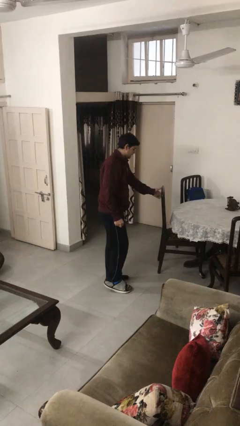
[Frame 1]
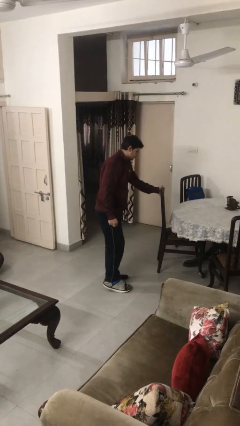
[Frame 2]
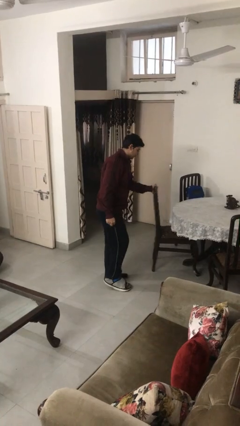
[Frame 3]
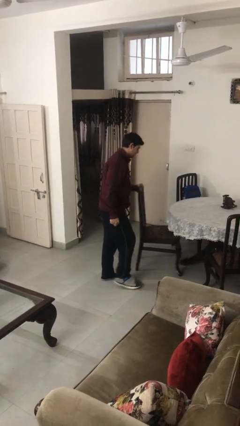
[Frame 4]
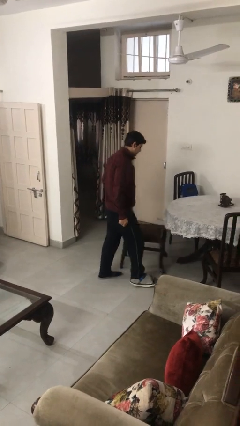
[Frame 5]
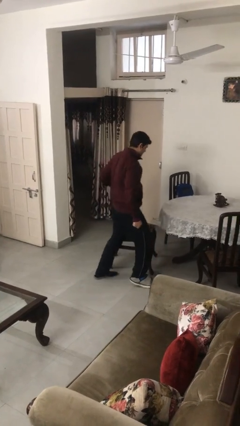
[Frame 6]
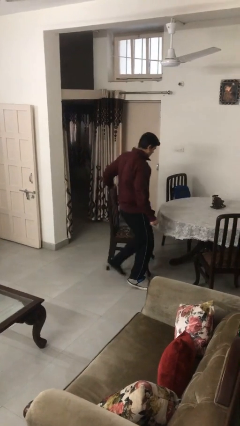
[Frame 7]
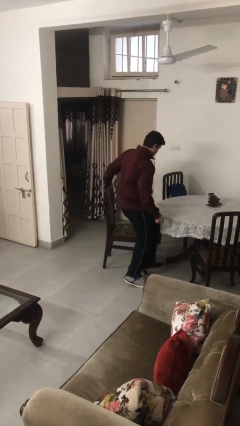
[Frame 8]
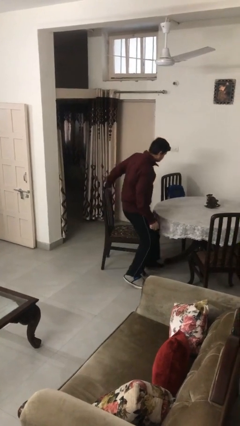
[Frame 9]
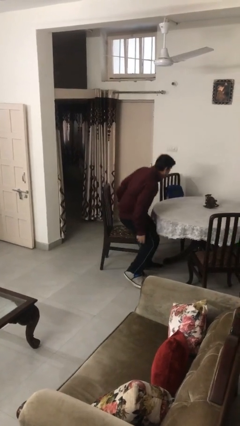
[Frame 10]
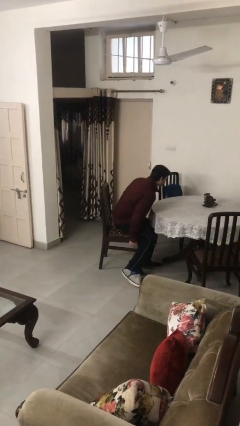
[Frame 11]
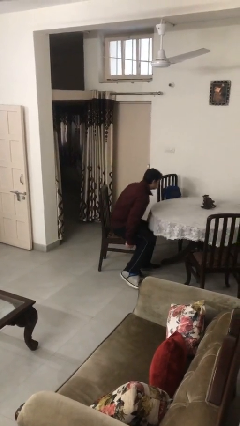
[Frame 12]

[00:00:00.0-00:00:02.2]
person sits down

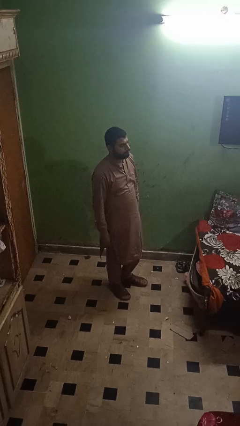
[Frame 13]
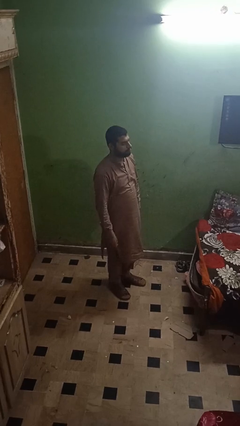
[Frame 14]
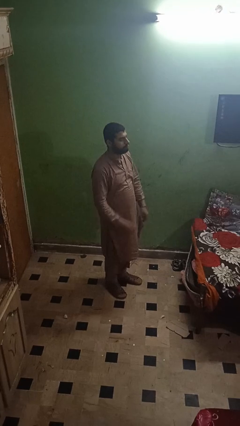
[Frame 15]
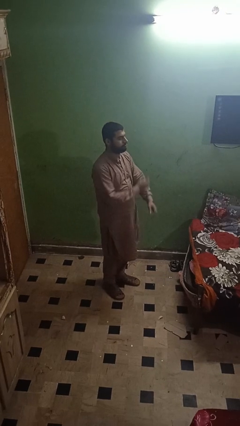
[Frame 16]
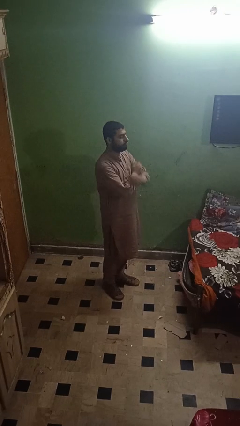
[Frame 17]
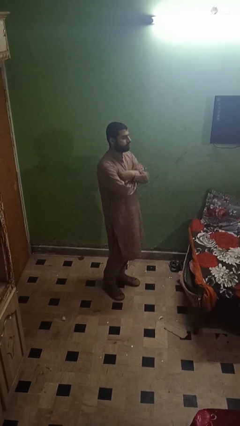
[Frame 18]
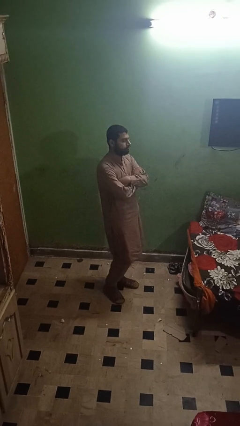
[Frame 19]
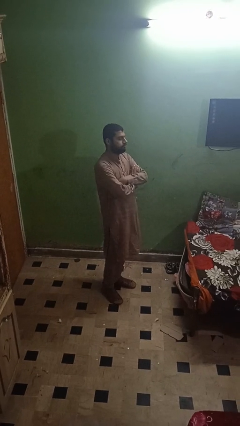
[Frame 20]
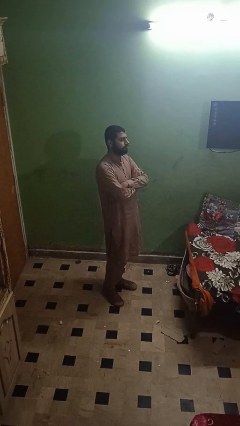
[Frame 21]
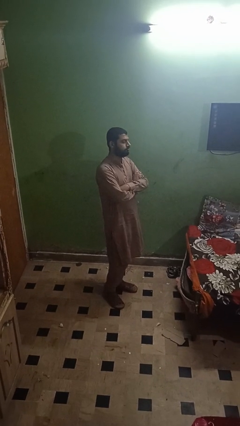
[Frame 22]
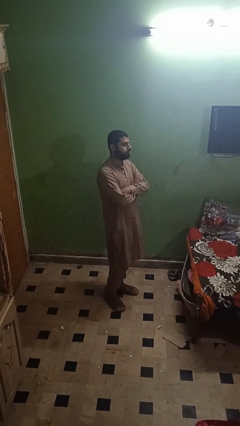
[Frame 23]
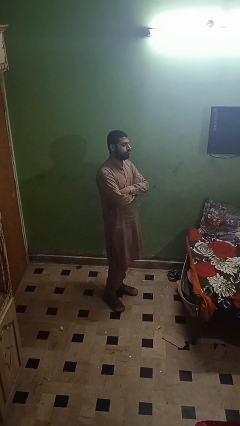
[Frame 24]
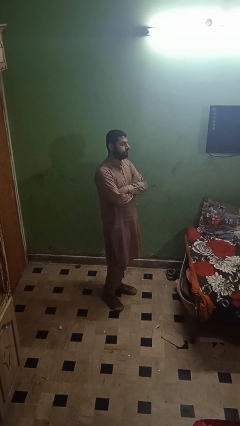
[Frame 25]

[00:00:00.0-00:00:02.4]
person crosses arms

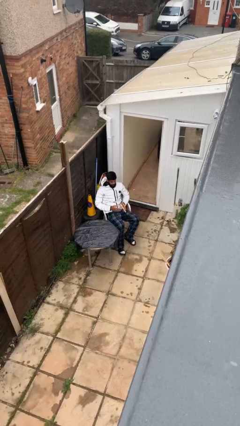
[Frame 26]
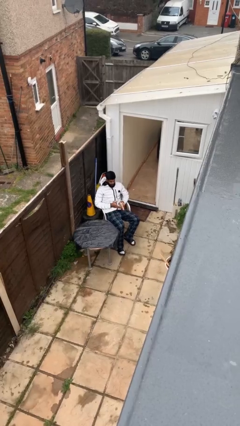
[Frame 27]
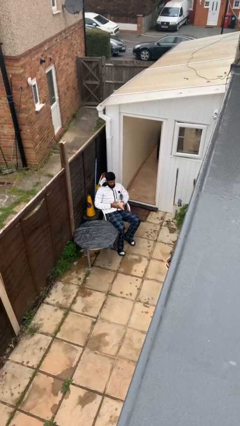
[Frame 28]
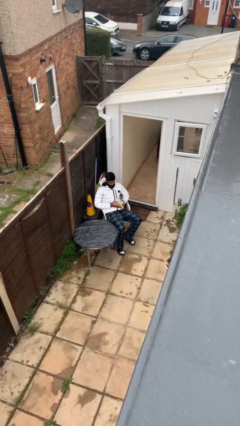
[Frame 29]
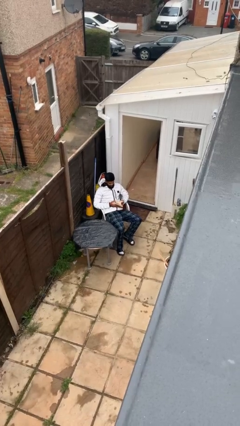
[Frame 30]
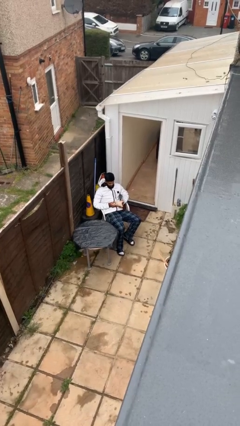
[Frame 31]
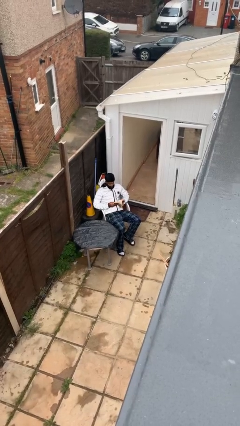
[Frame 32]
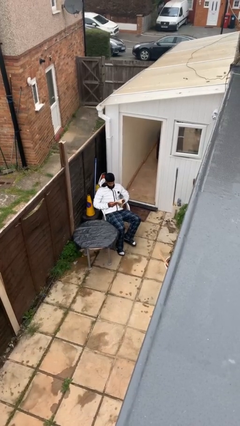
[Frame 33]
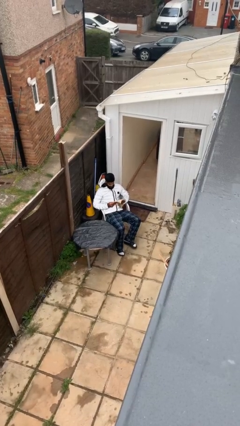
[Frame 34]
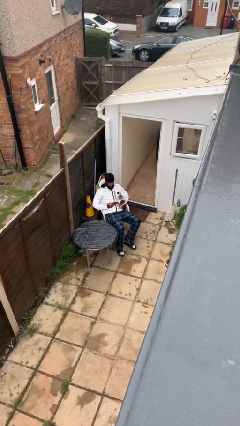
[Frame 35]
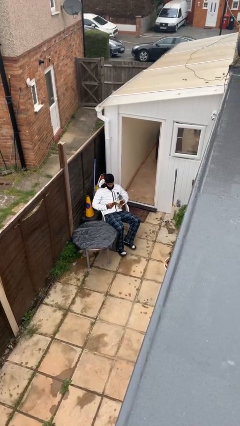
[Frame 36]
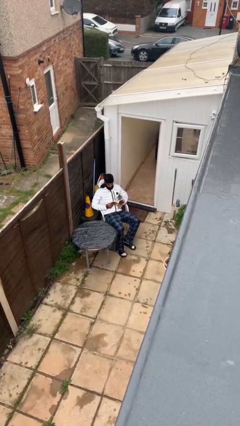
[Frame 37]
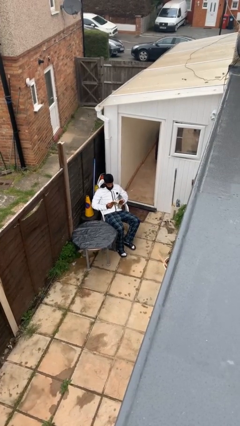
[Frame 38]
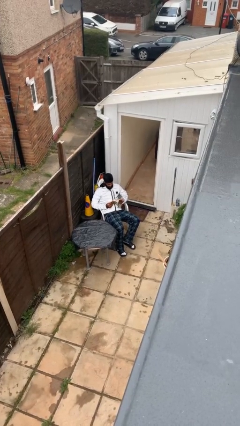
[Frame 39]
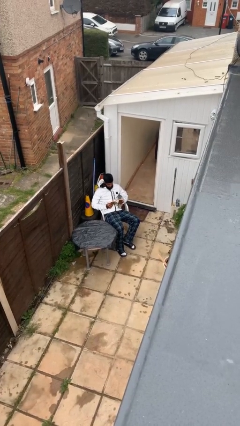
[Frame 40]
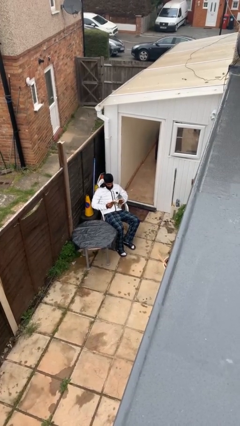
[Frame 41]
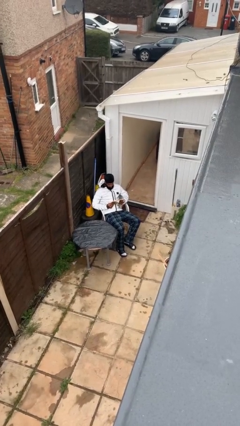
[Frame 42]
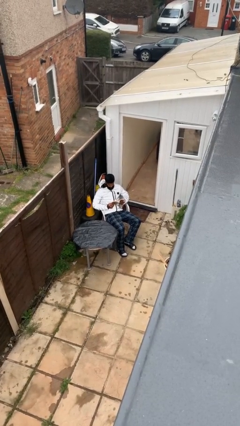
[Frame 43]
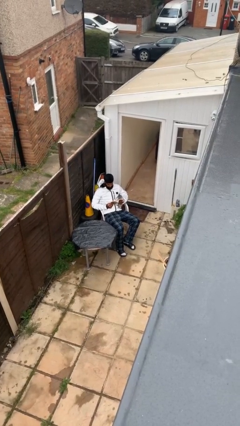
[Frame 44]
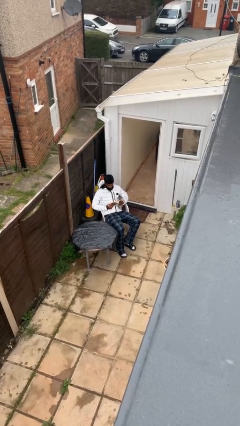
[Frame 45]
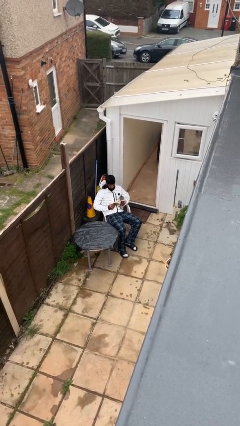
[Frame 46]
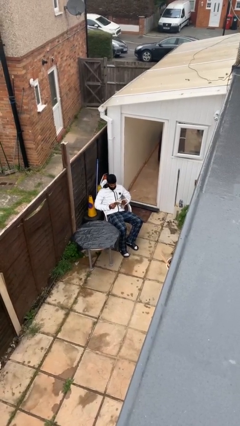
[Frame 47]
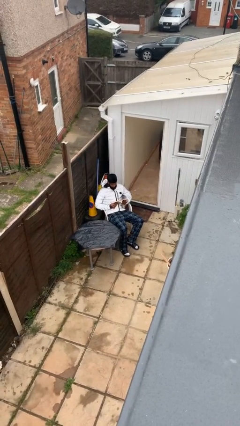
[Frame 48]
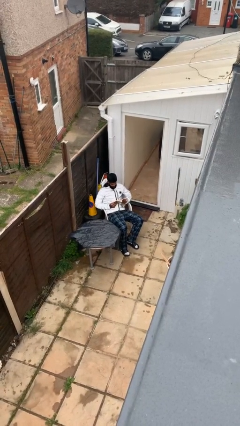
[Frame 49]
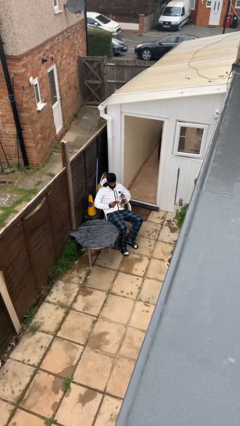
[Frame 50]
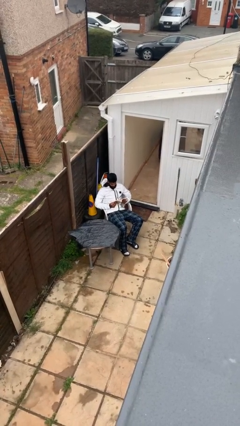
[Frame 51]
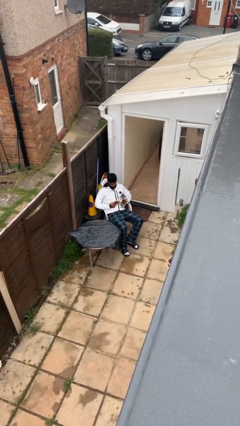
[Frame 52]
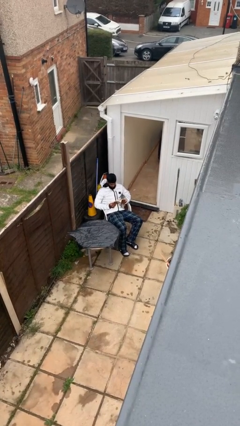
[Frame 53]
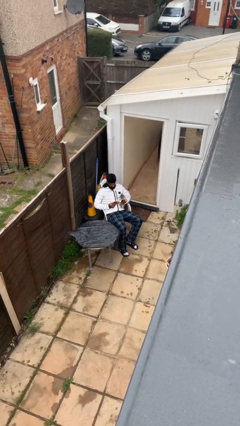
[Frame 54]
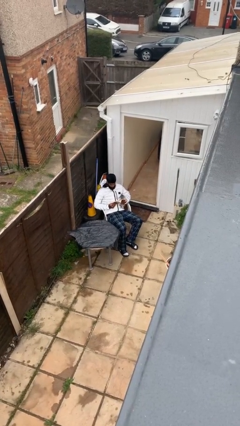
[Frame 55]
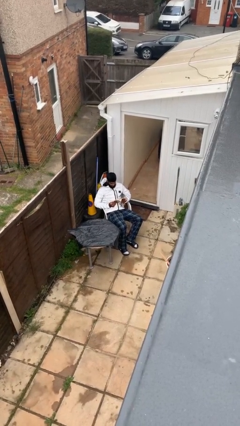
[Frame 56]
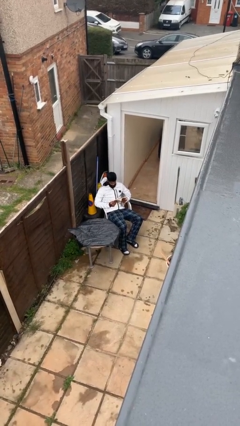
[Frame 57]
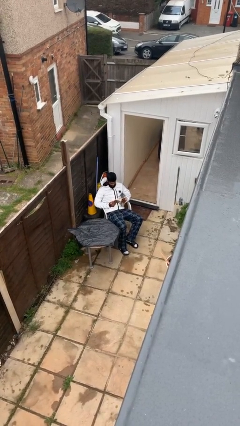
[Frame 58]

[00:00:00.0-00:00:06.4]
person reads document

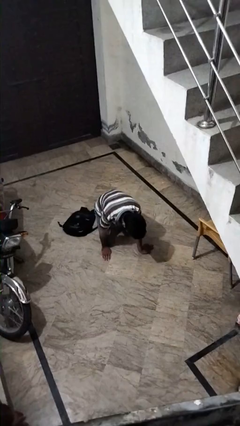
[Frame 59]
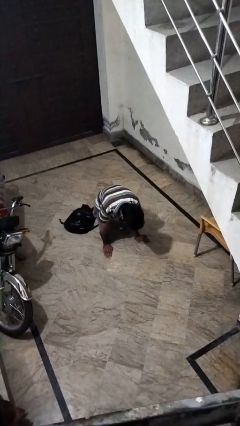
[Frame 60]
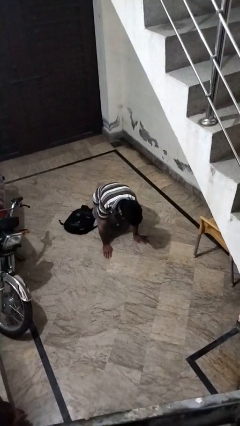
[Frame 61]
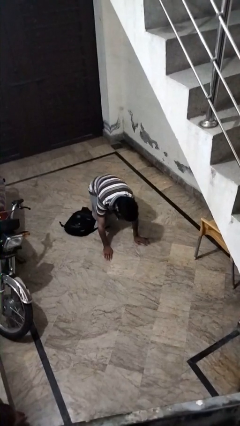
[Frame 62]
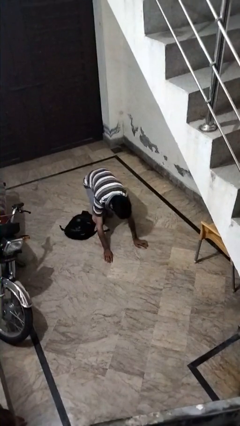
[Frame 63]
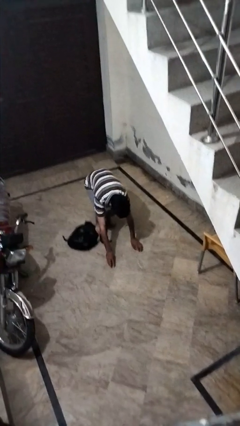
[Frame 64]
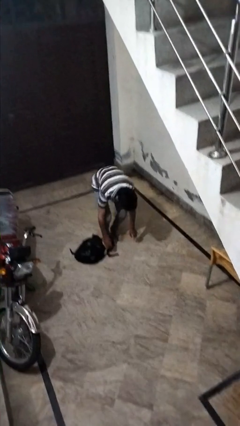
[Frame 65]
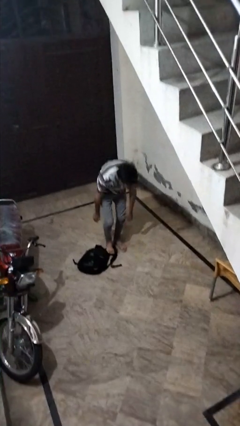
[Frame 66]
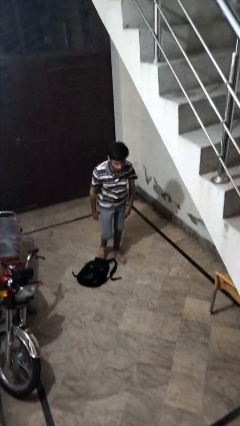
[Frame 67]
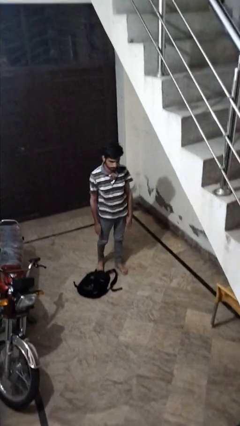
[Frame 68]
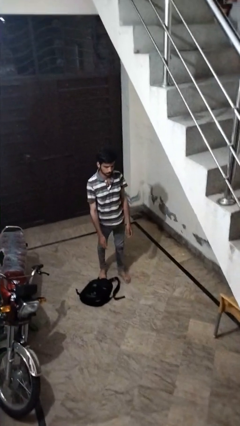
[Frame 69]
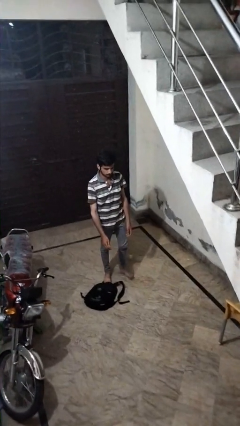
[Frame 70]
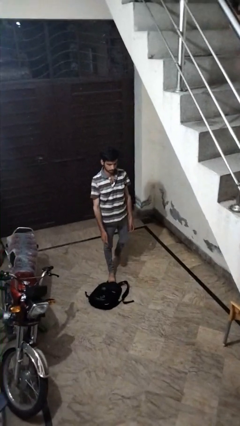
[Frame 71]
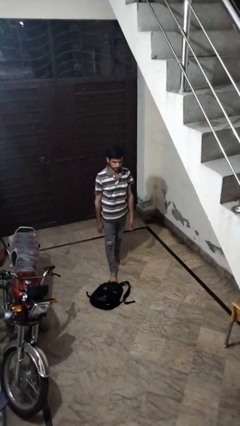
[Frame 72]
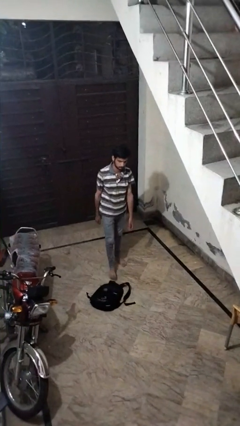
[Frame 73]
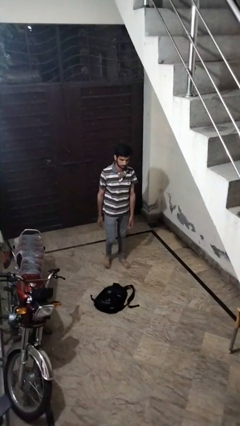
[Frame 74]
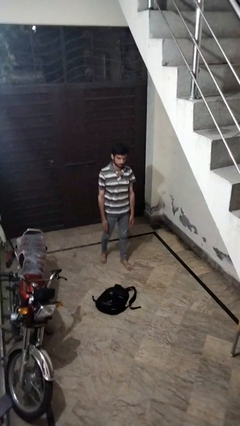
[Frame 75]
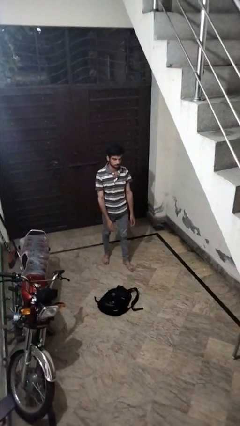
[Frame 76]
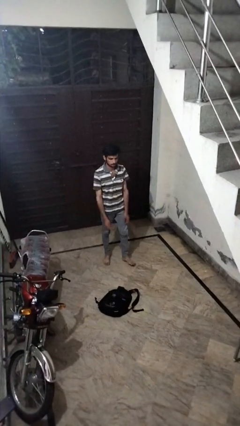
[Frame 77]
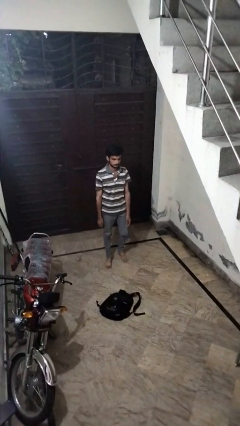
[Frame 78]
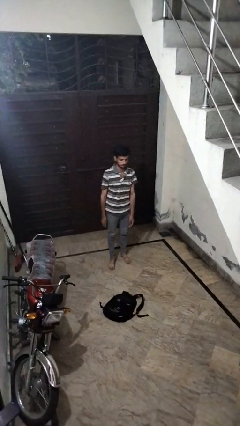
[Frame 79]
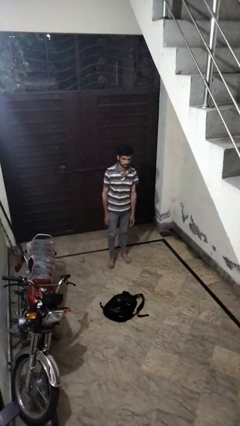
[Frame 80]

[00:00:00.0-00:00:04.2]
person stands up from floor

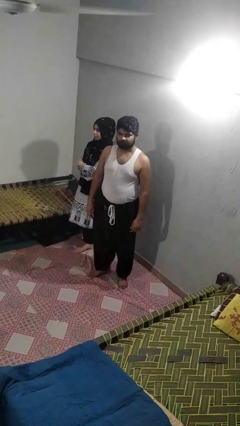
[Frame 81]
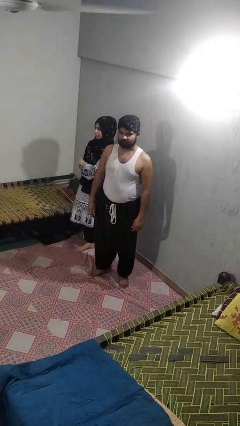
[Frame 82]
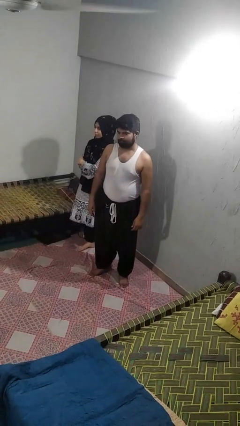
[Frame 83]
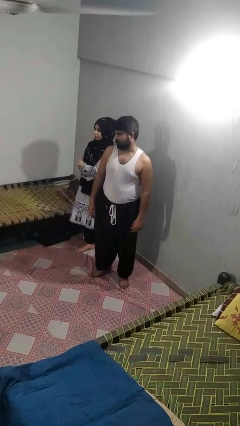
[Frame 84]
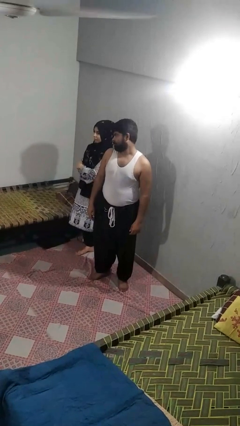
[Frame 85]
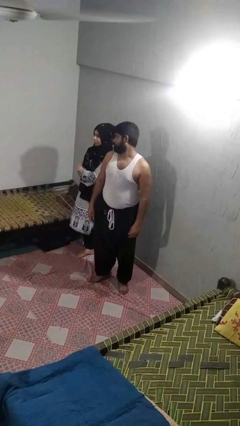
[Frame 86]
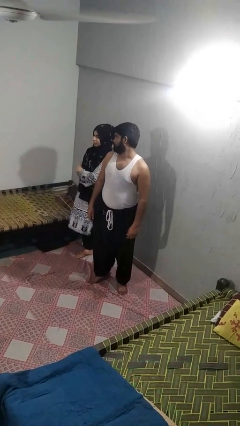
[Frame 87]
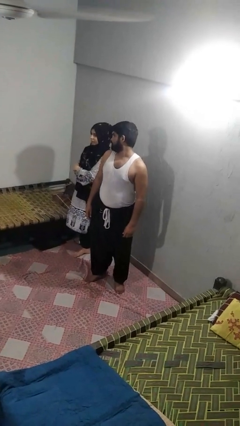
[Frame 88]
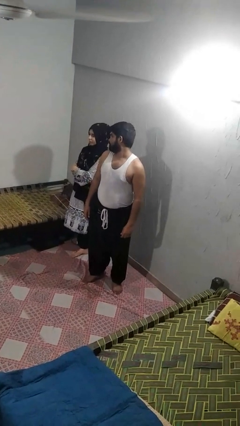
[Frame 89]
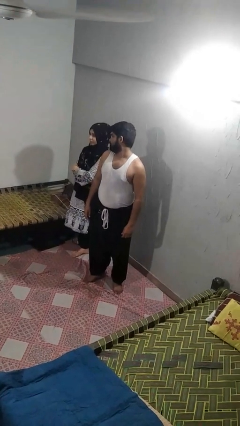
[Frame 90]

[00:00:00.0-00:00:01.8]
person looks over shoulder

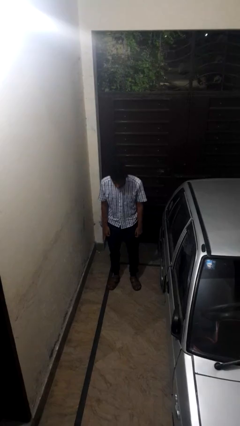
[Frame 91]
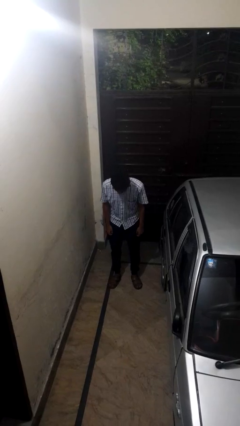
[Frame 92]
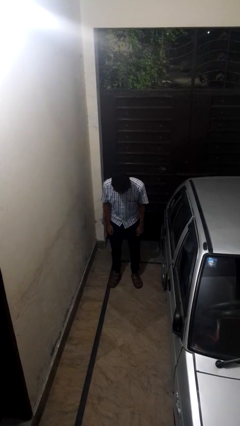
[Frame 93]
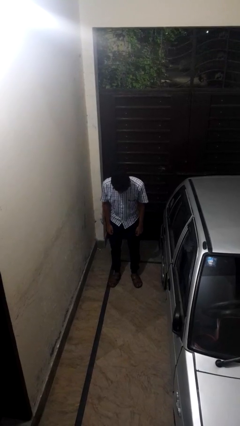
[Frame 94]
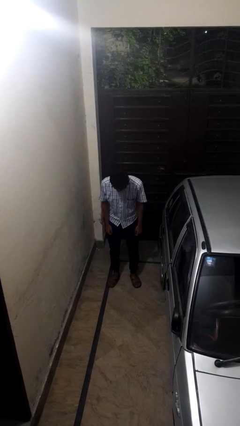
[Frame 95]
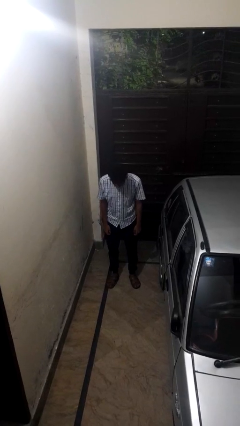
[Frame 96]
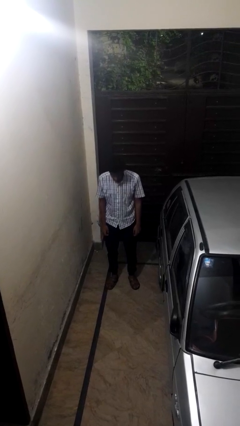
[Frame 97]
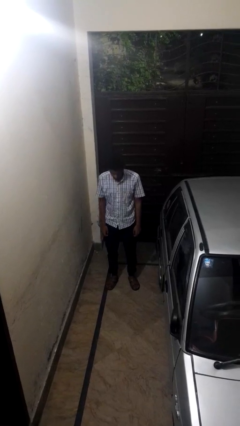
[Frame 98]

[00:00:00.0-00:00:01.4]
person bows
